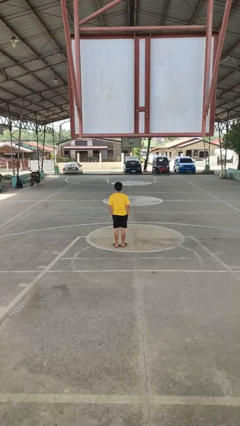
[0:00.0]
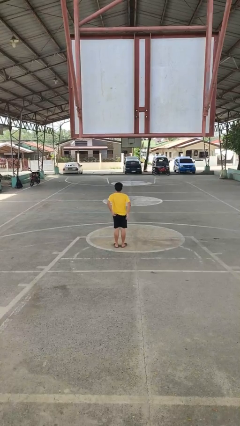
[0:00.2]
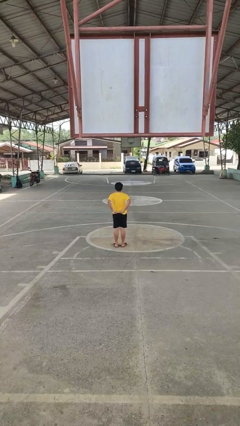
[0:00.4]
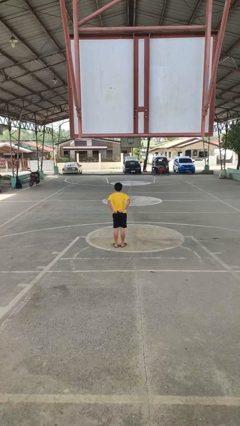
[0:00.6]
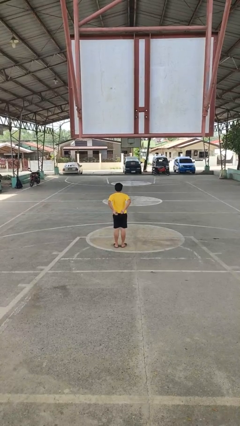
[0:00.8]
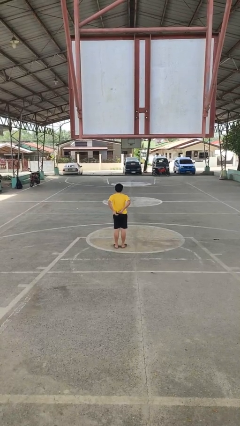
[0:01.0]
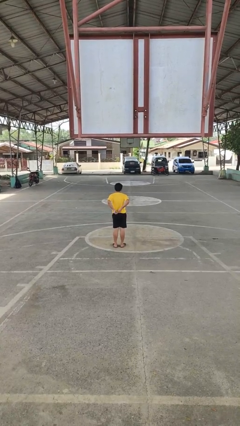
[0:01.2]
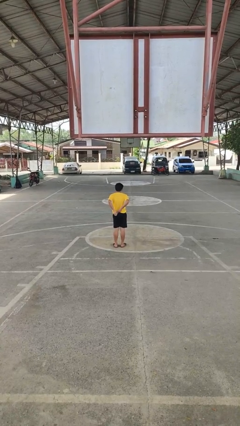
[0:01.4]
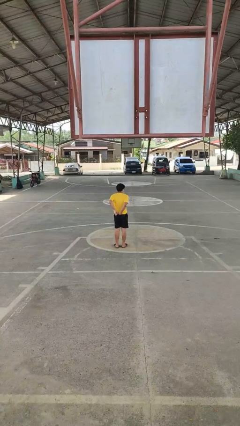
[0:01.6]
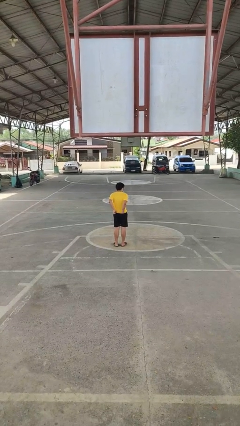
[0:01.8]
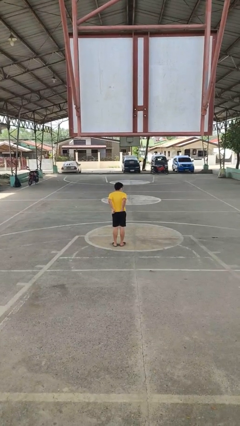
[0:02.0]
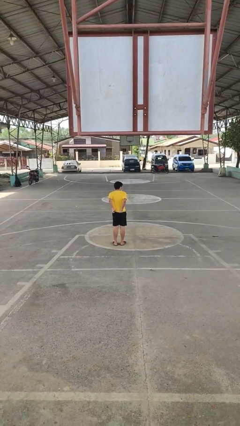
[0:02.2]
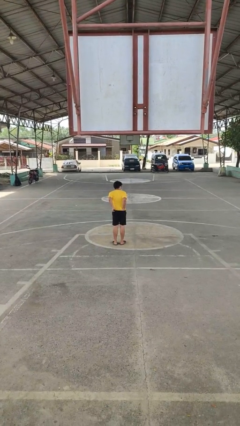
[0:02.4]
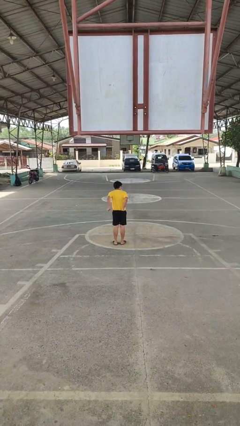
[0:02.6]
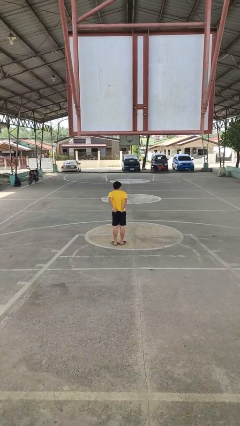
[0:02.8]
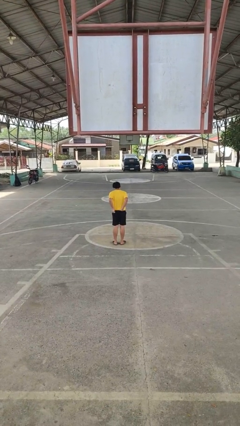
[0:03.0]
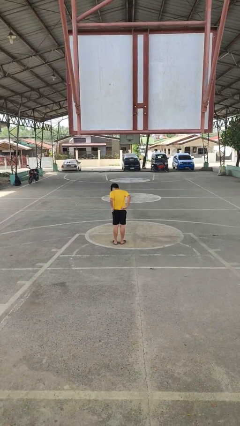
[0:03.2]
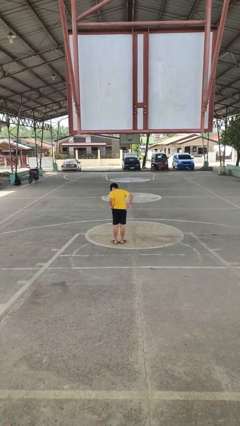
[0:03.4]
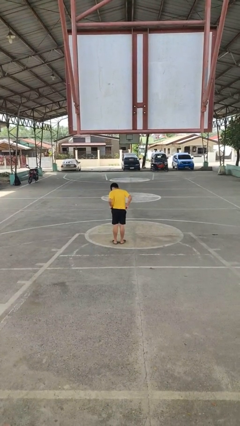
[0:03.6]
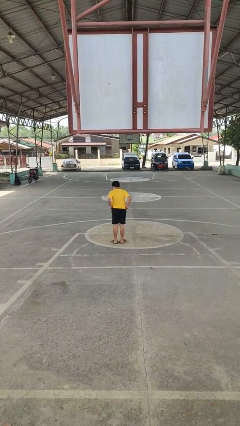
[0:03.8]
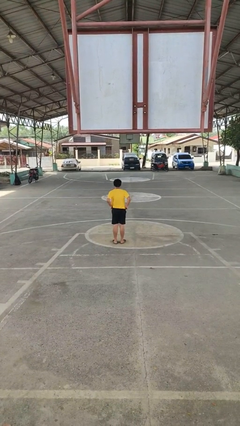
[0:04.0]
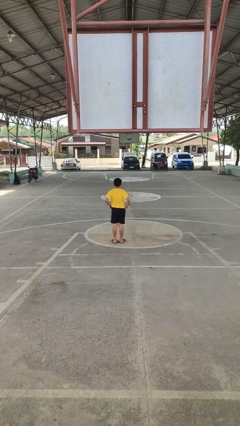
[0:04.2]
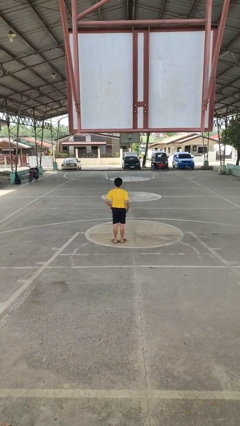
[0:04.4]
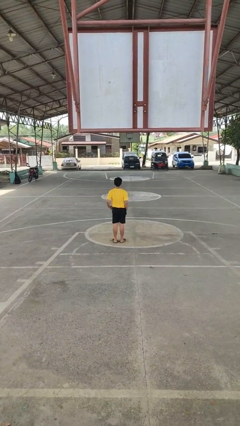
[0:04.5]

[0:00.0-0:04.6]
person tucks in shirt

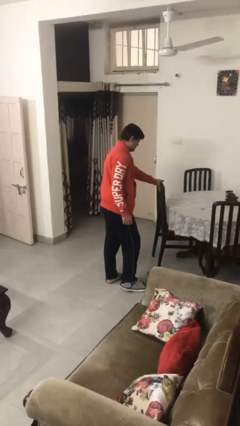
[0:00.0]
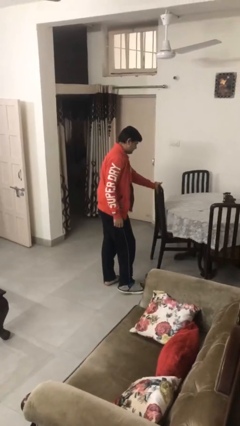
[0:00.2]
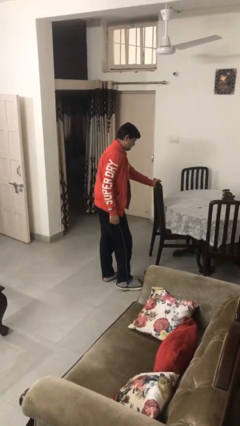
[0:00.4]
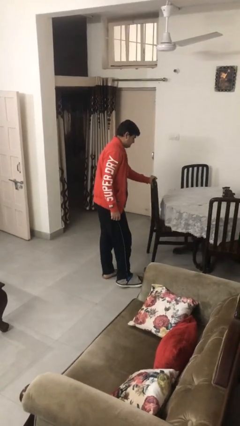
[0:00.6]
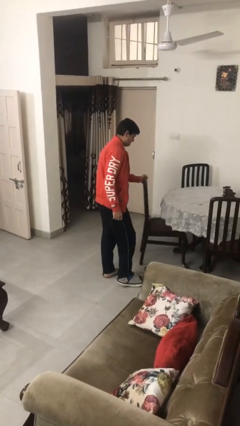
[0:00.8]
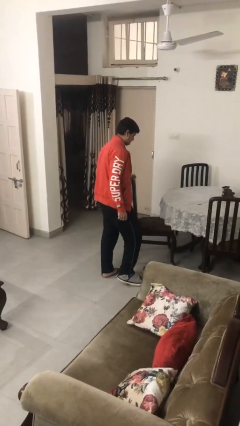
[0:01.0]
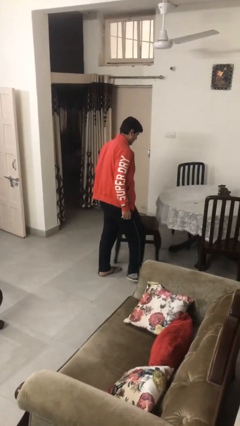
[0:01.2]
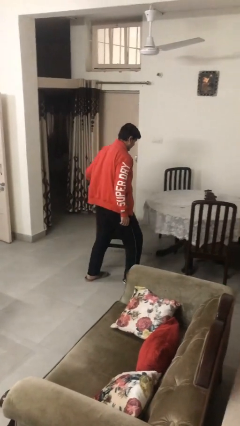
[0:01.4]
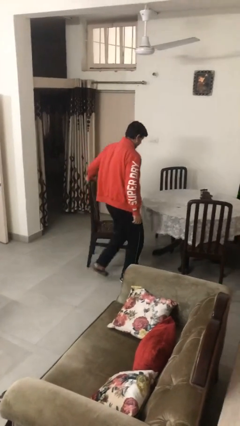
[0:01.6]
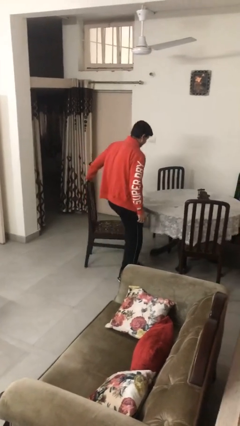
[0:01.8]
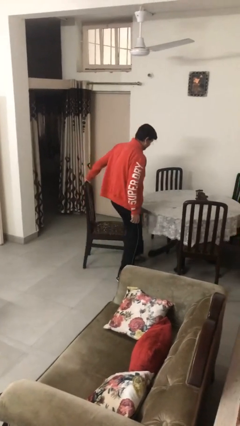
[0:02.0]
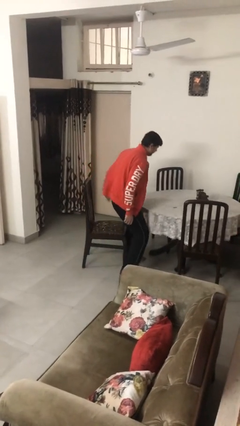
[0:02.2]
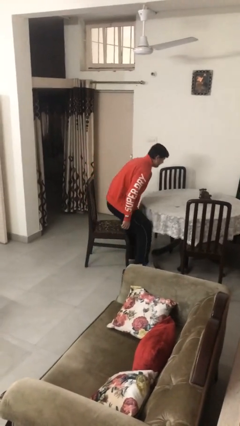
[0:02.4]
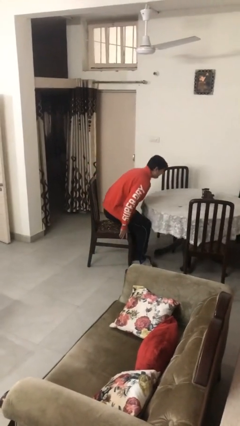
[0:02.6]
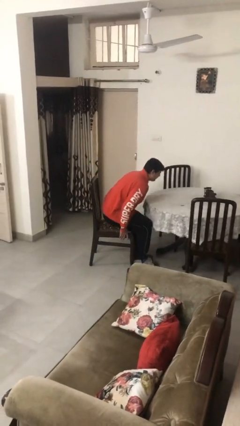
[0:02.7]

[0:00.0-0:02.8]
person sits down

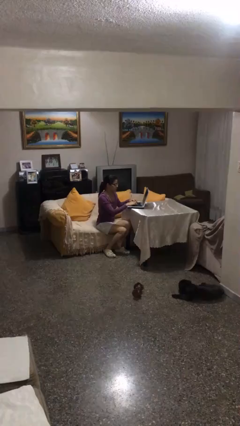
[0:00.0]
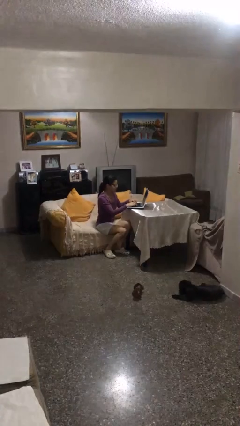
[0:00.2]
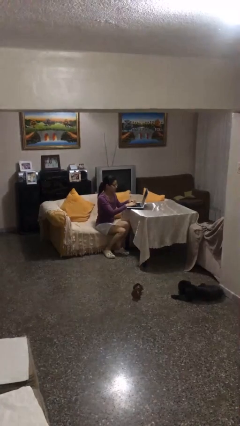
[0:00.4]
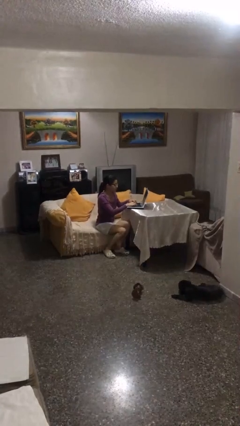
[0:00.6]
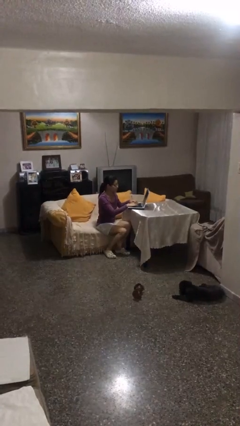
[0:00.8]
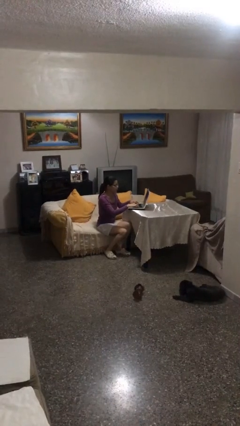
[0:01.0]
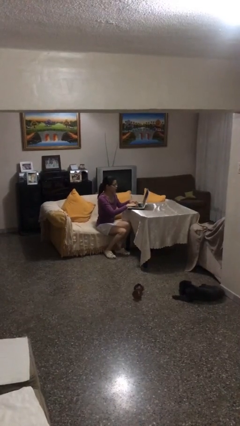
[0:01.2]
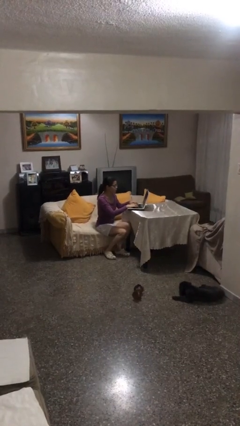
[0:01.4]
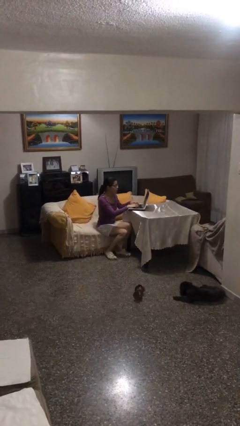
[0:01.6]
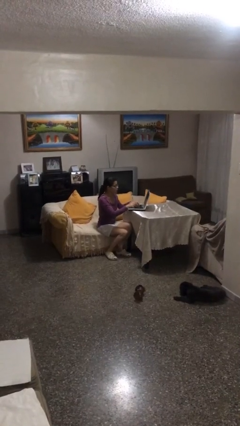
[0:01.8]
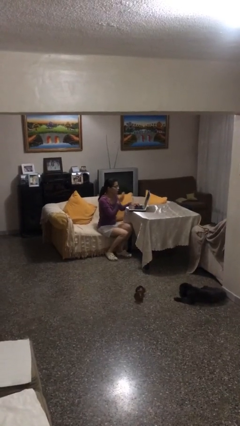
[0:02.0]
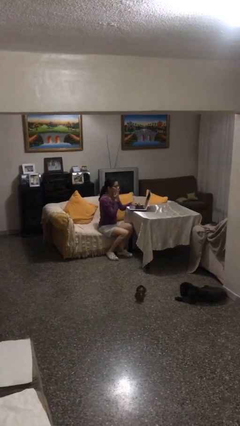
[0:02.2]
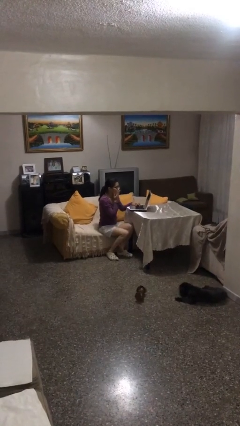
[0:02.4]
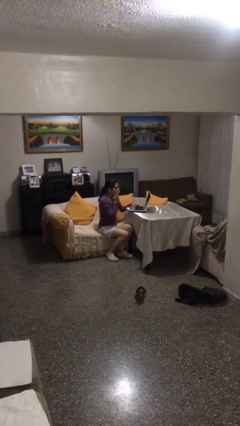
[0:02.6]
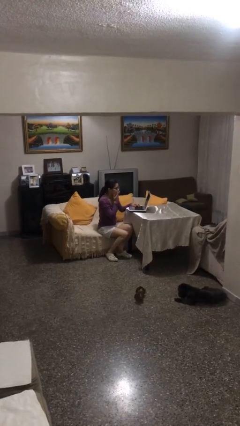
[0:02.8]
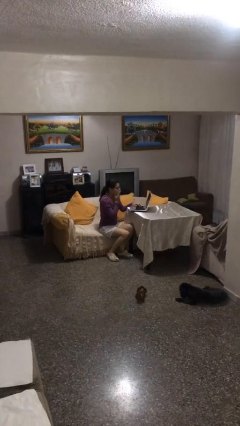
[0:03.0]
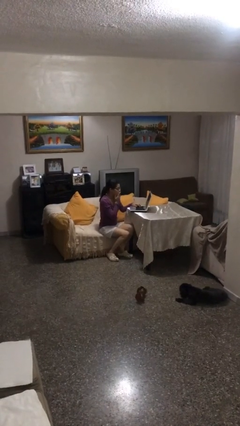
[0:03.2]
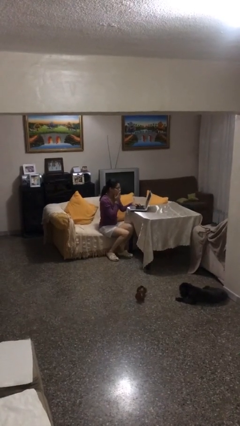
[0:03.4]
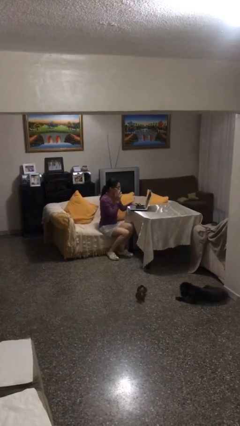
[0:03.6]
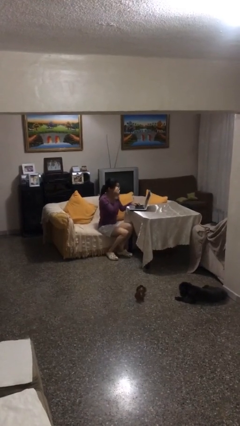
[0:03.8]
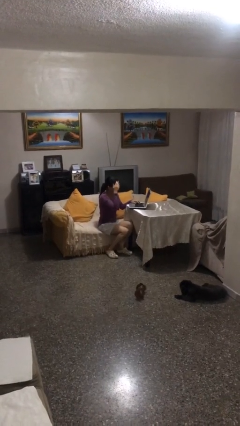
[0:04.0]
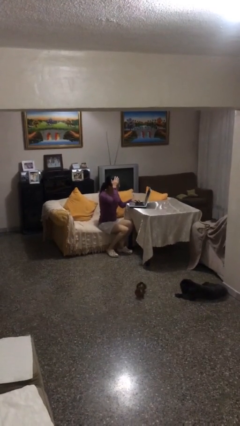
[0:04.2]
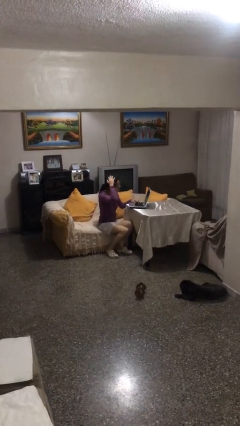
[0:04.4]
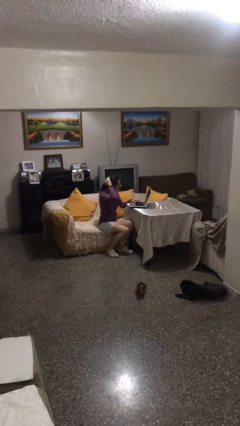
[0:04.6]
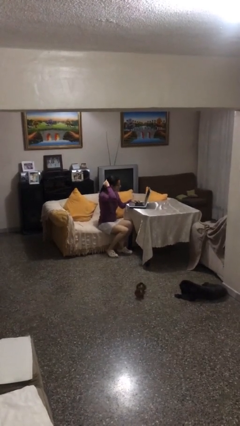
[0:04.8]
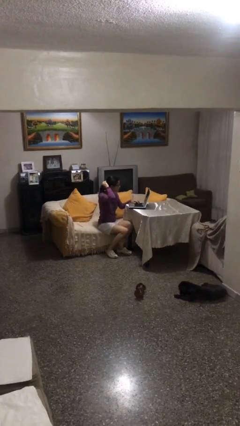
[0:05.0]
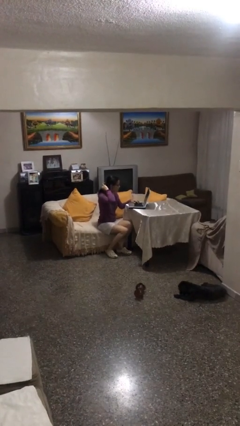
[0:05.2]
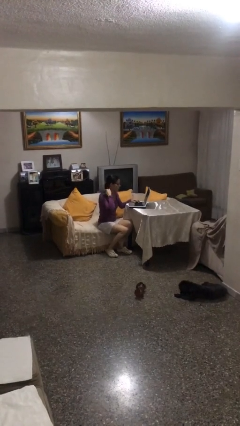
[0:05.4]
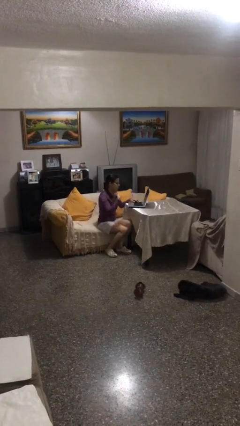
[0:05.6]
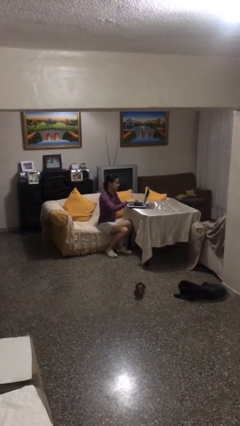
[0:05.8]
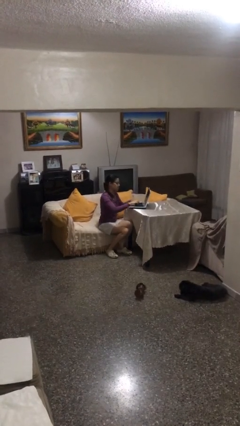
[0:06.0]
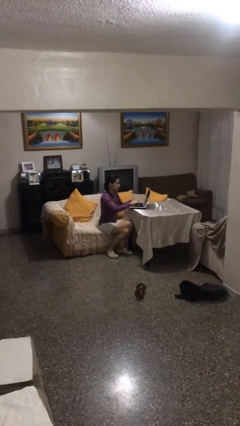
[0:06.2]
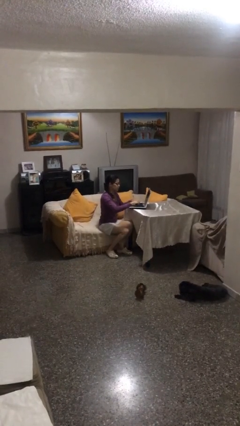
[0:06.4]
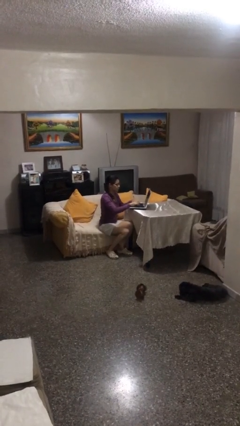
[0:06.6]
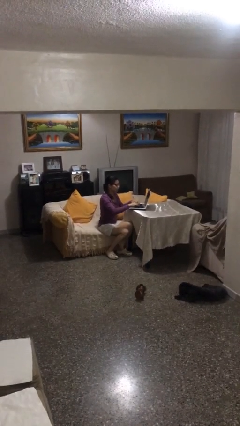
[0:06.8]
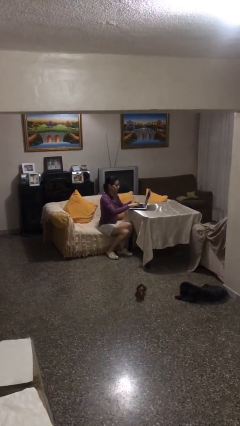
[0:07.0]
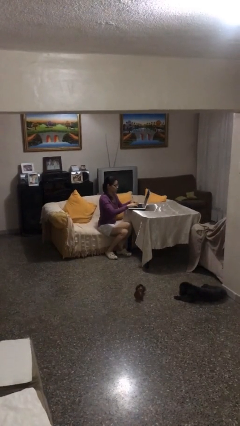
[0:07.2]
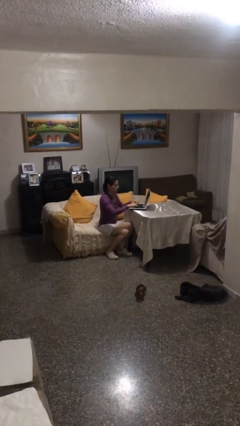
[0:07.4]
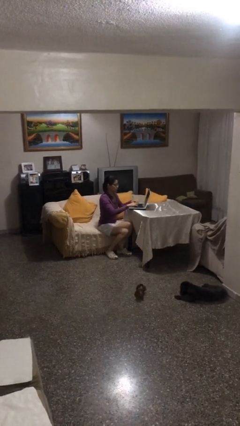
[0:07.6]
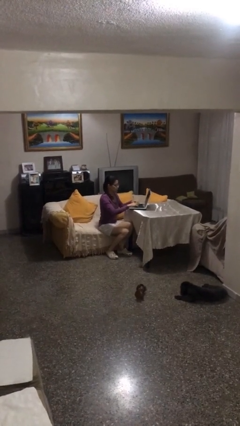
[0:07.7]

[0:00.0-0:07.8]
person interacts with laptop

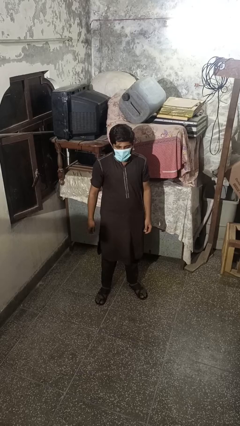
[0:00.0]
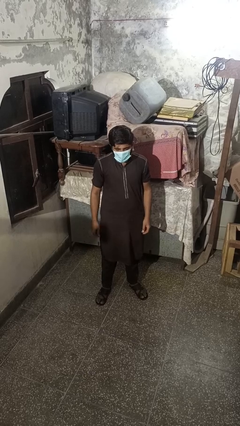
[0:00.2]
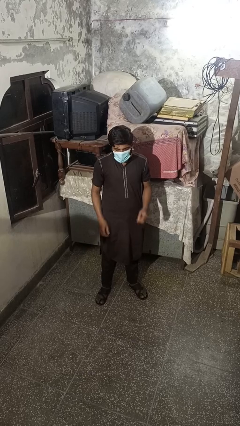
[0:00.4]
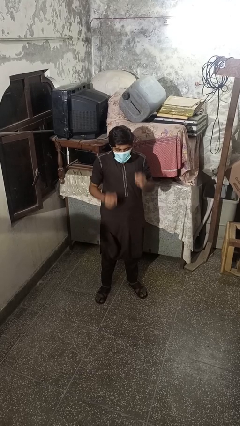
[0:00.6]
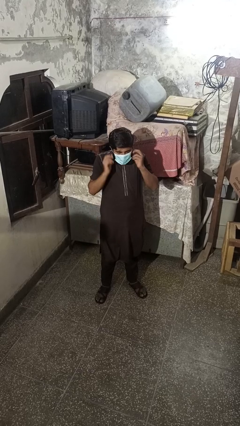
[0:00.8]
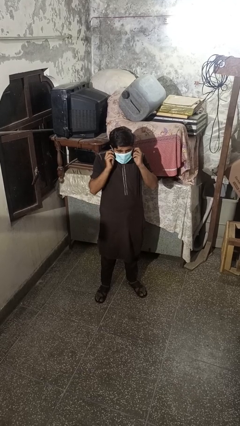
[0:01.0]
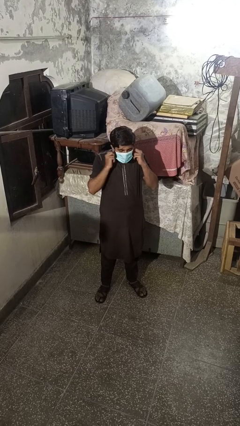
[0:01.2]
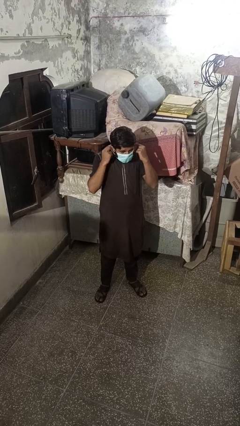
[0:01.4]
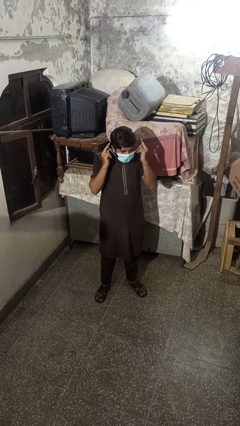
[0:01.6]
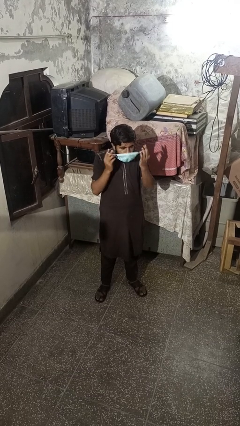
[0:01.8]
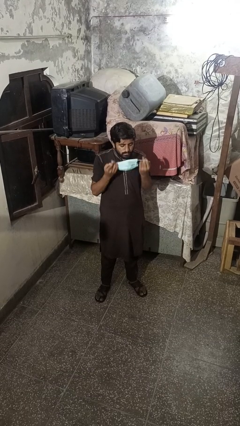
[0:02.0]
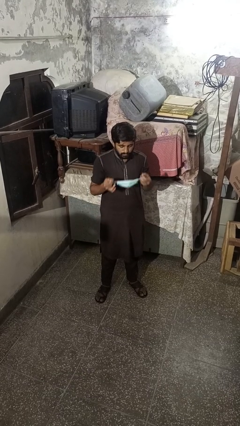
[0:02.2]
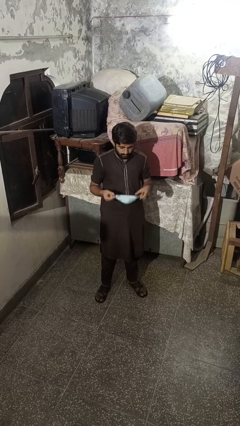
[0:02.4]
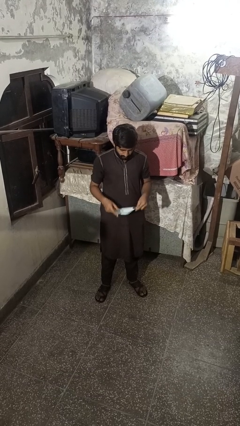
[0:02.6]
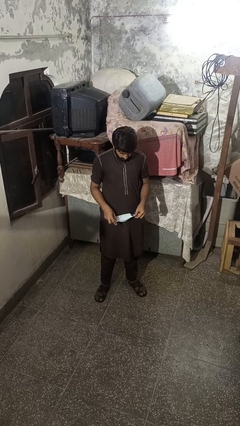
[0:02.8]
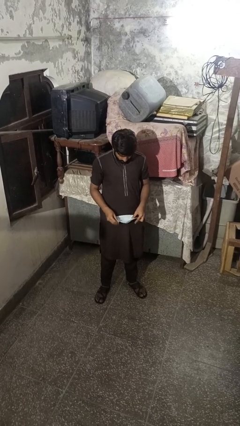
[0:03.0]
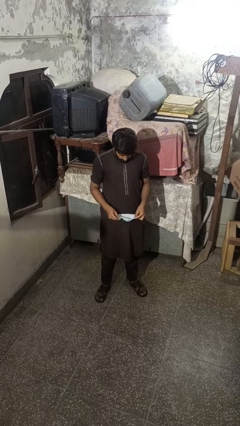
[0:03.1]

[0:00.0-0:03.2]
person takes off facemask
